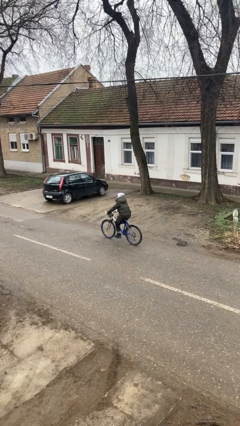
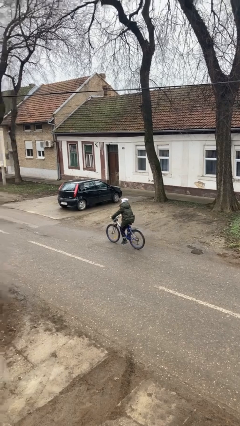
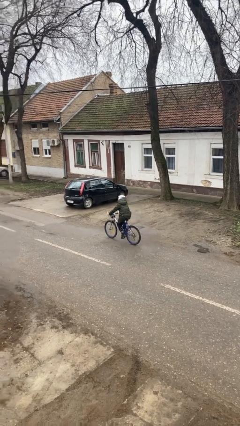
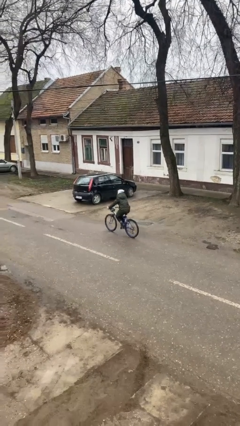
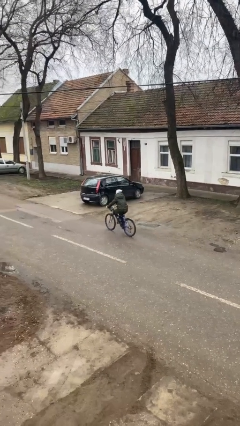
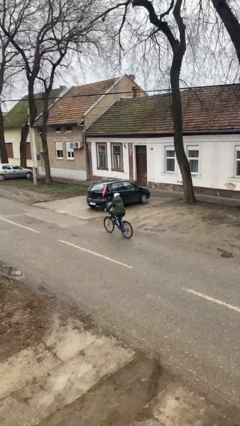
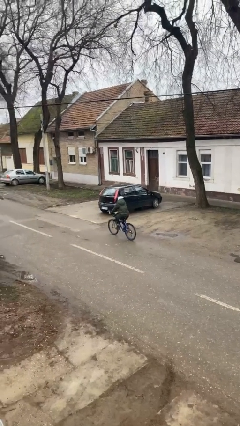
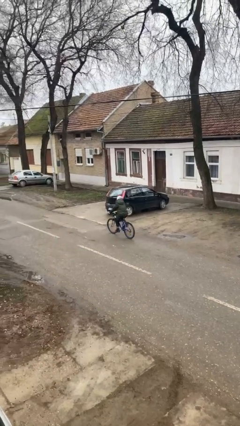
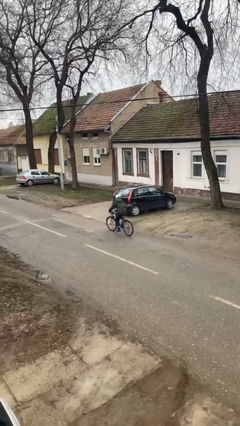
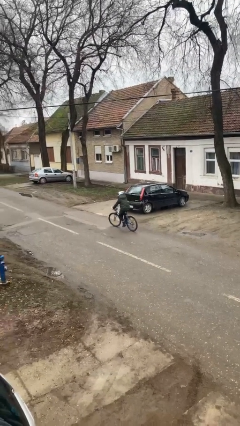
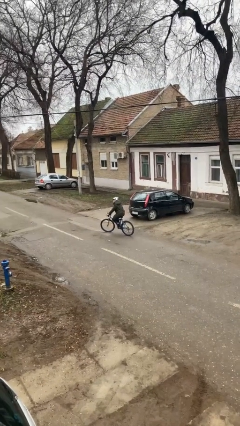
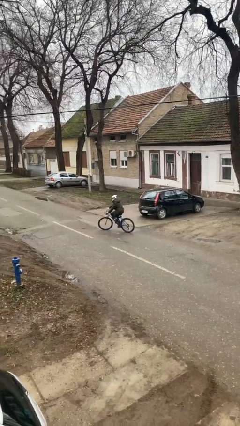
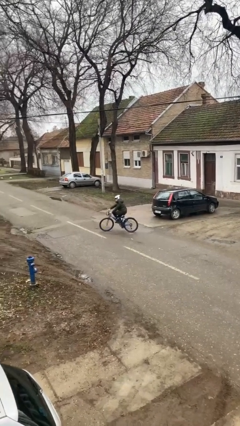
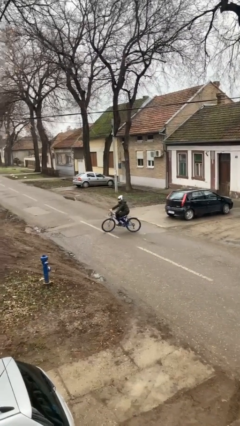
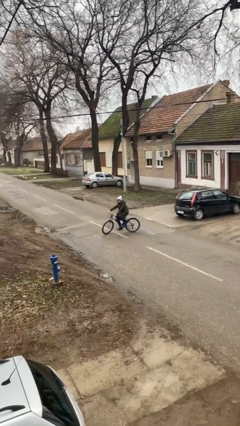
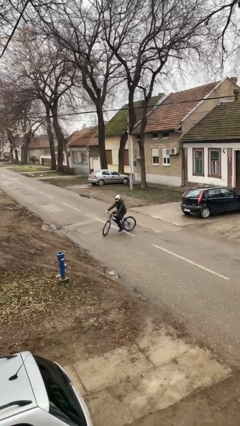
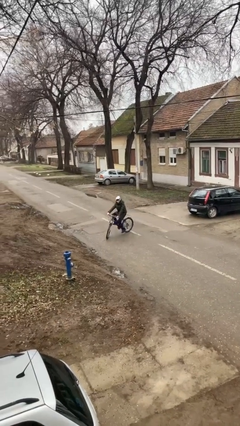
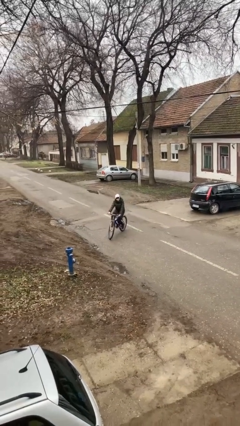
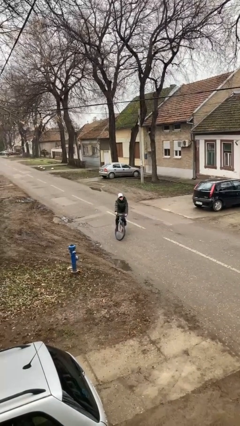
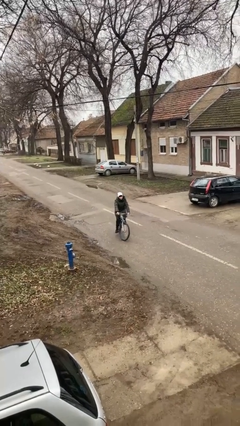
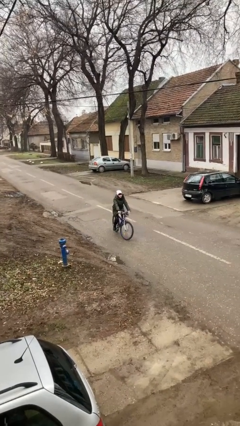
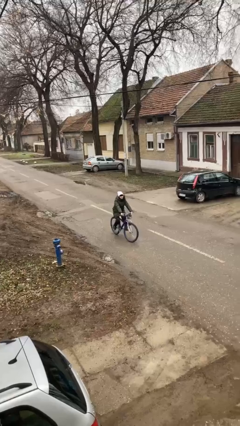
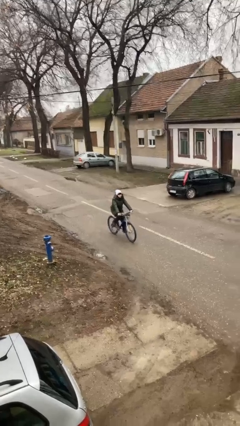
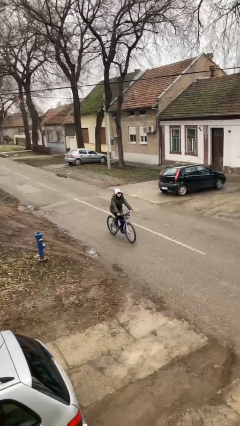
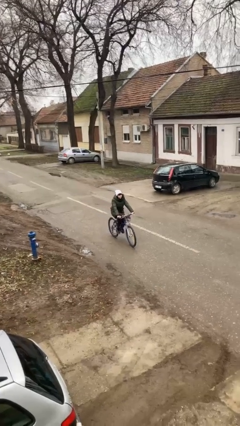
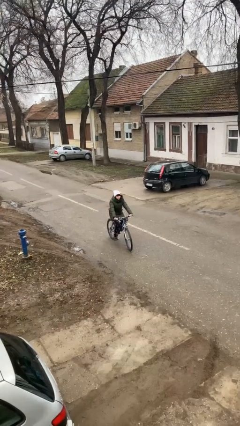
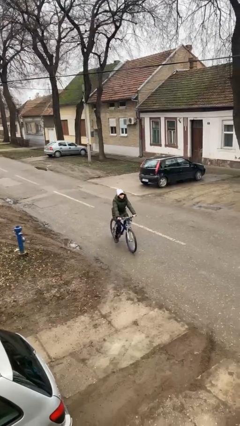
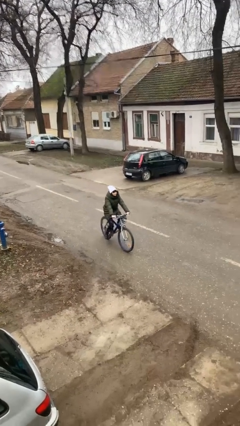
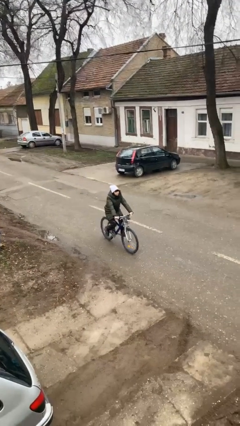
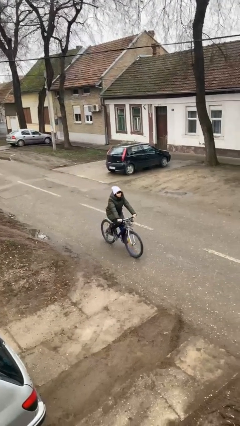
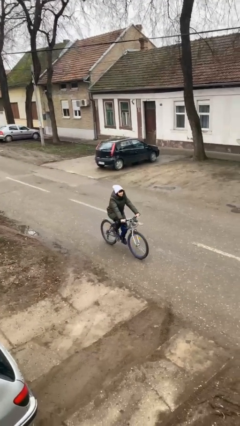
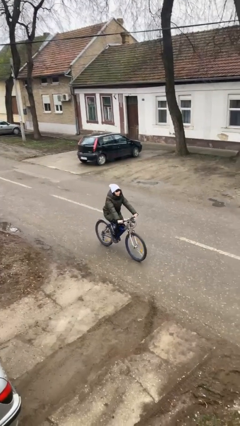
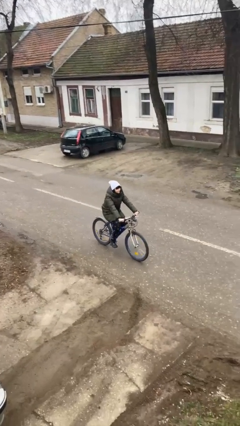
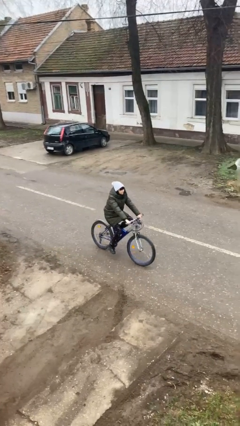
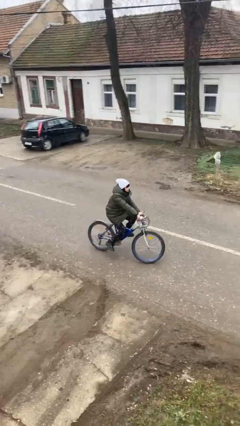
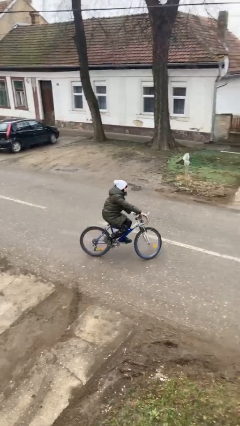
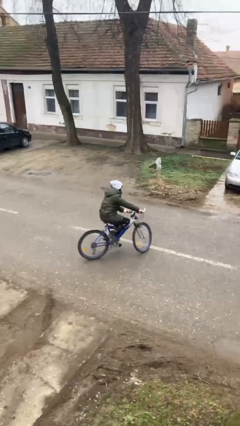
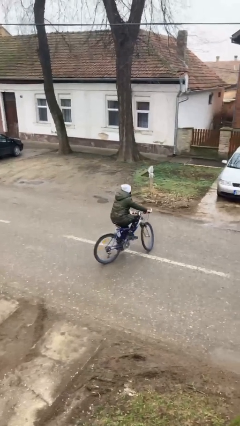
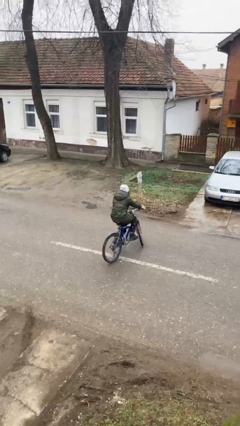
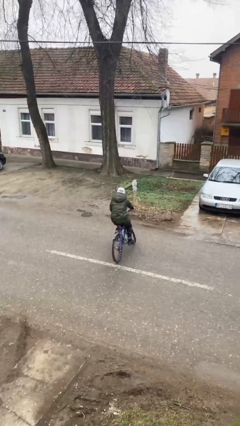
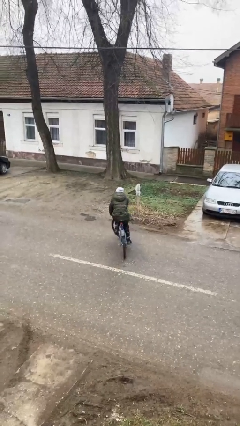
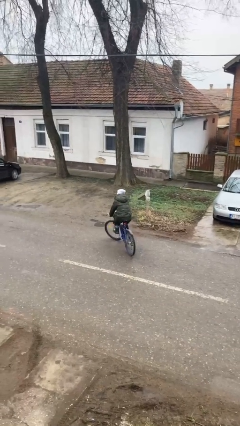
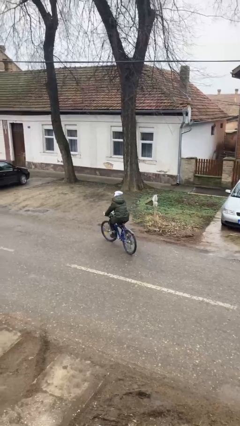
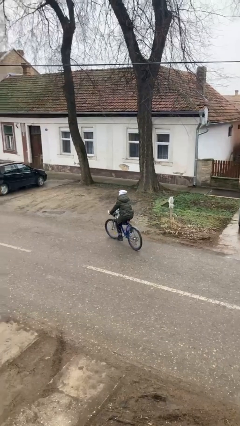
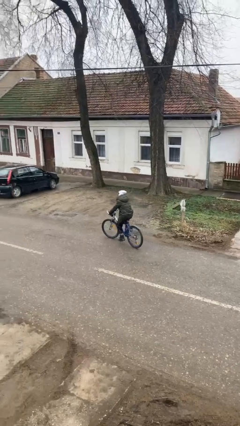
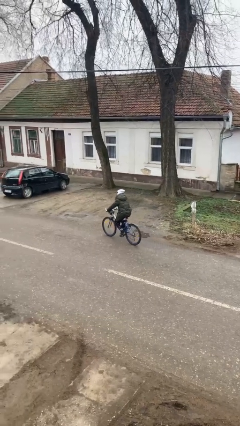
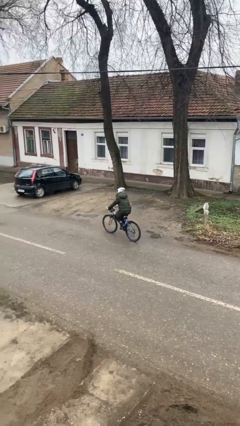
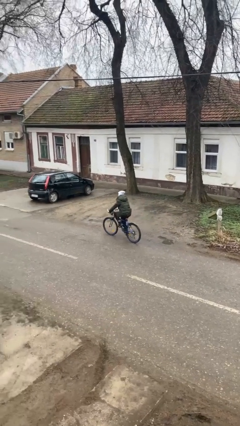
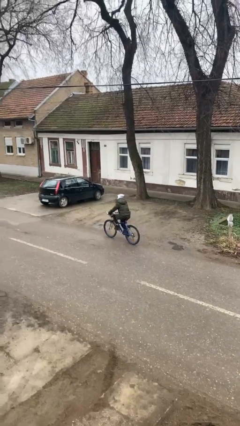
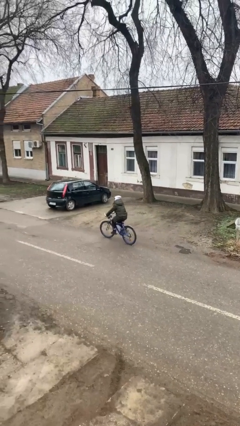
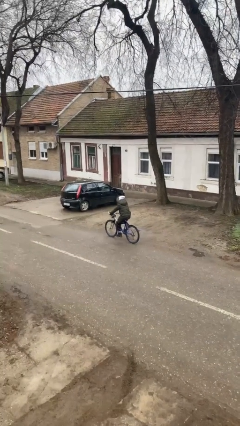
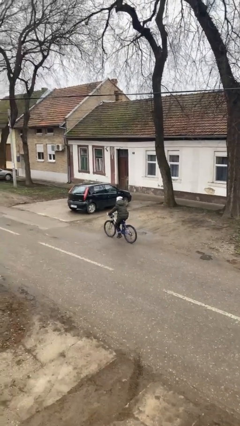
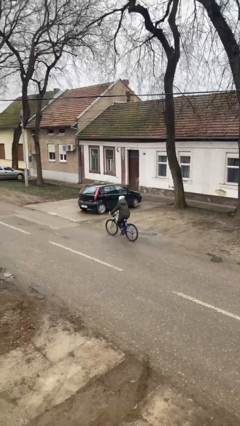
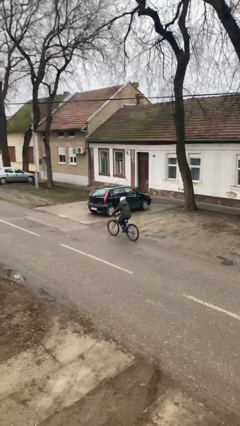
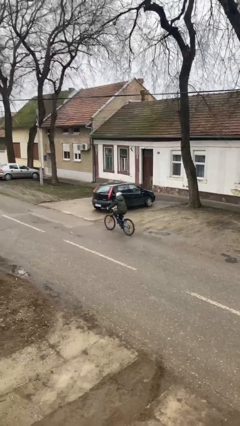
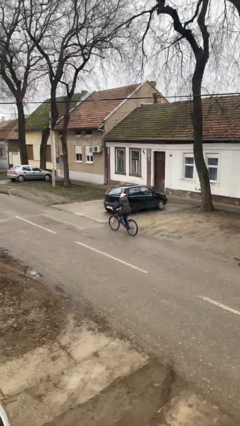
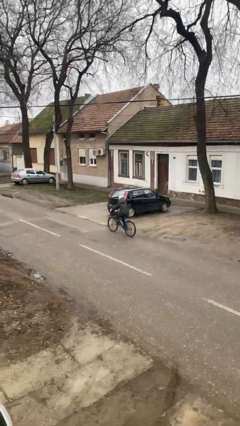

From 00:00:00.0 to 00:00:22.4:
person rides bicycle

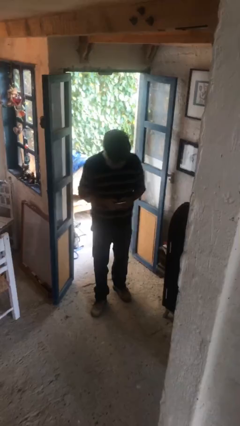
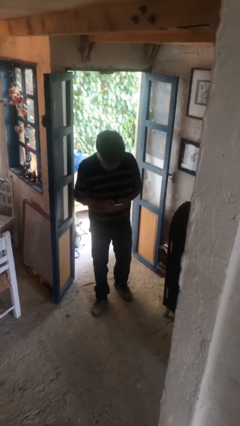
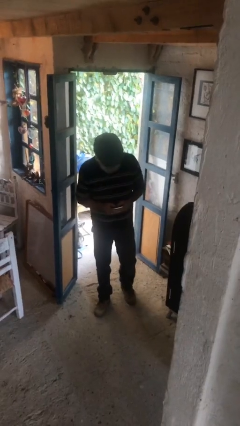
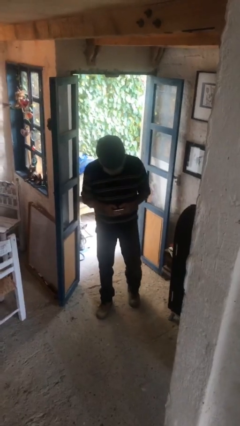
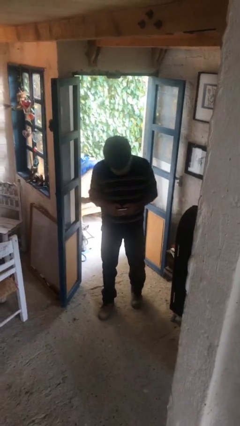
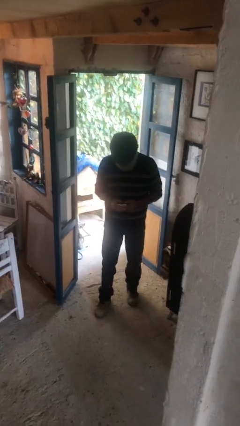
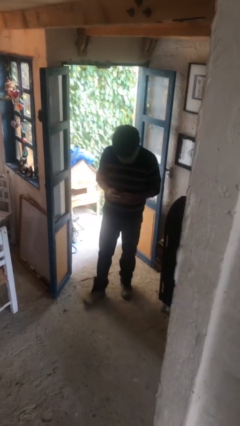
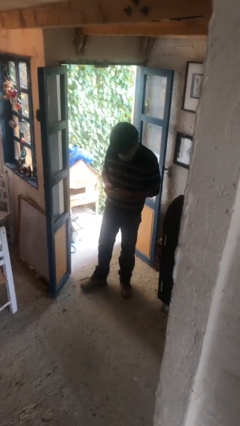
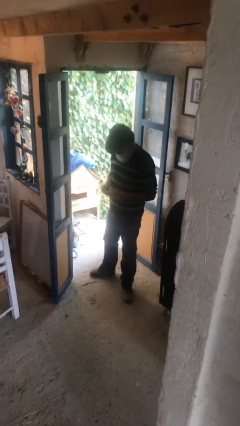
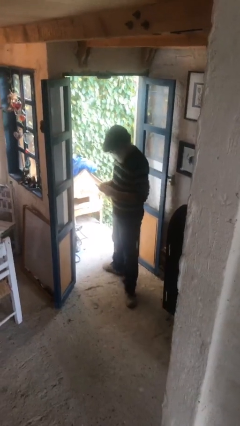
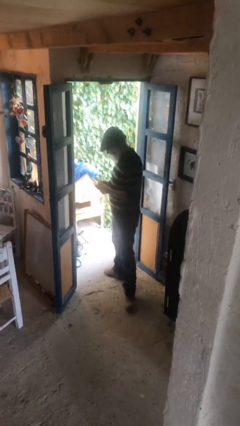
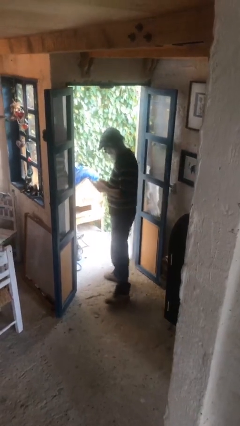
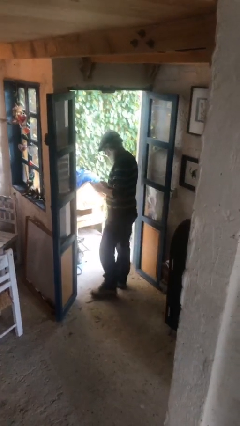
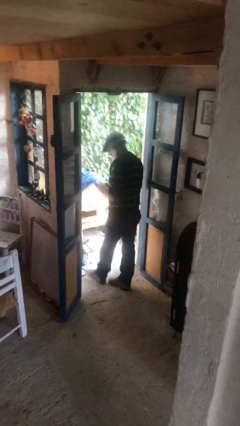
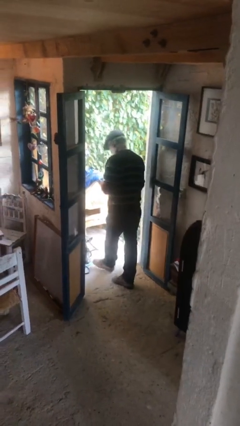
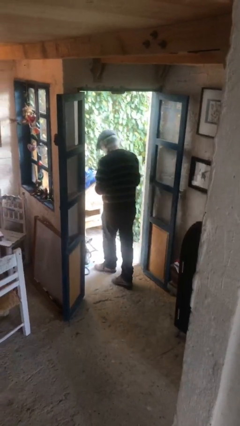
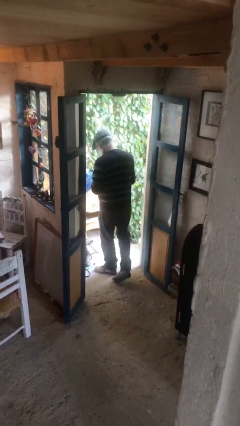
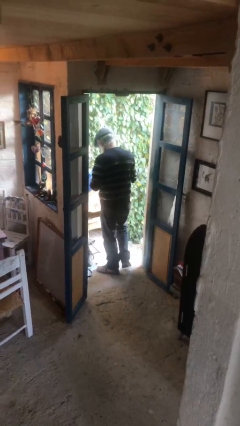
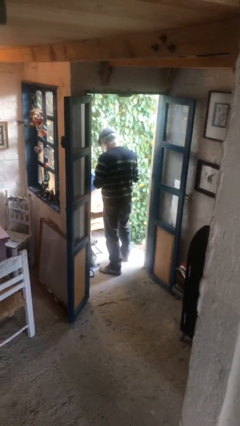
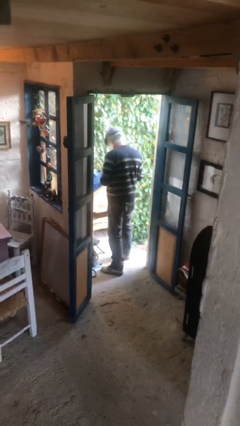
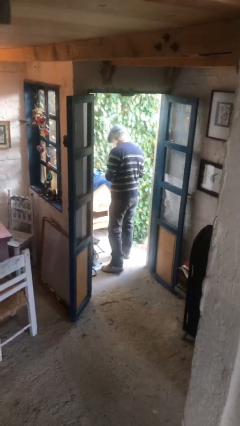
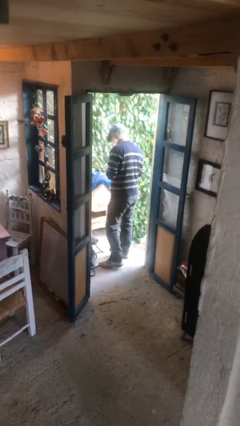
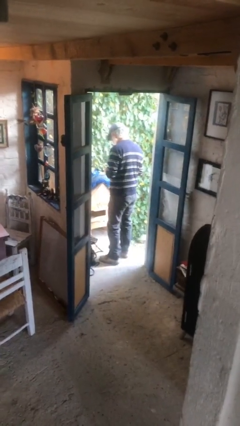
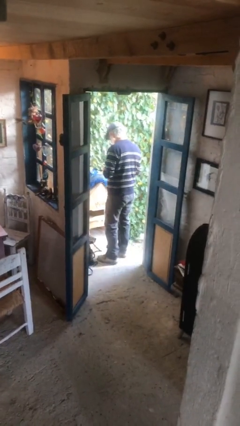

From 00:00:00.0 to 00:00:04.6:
person exits scene through structure

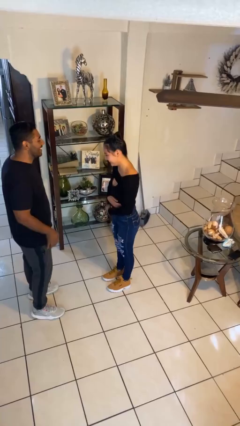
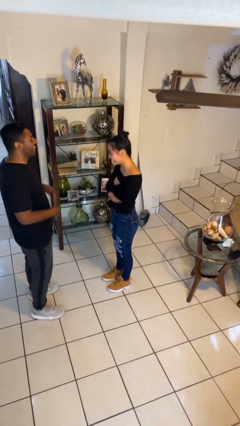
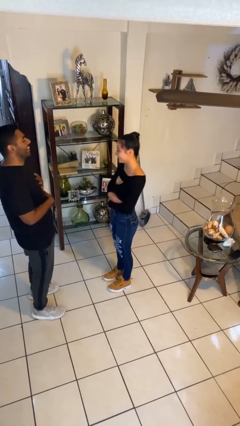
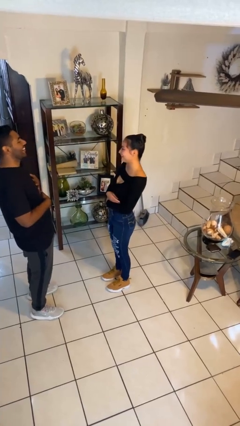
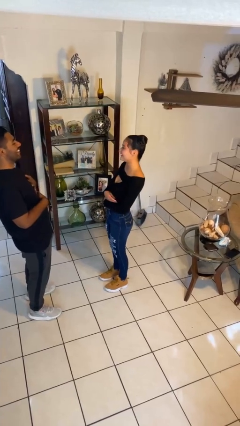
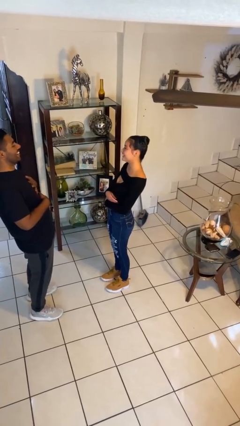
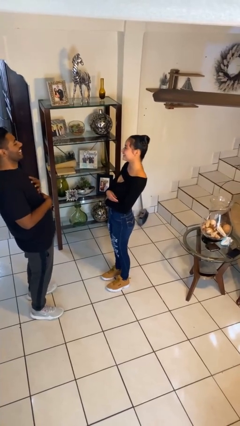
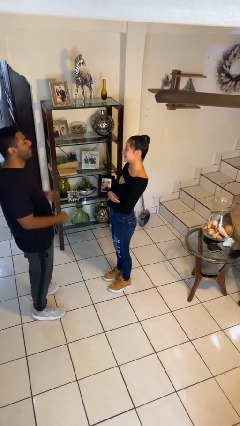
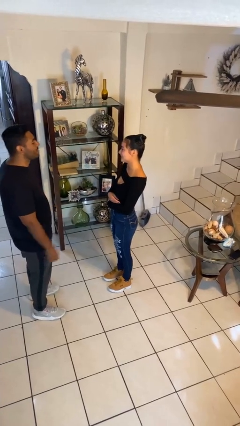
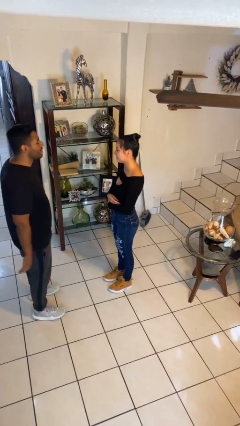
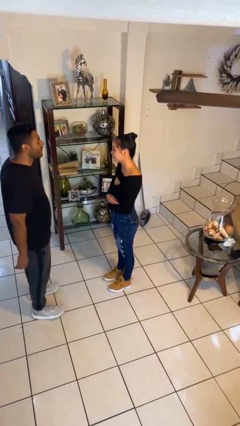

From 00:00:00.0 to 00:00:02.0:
person laughs with person
